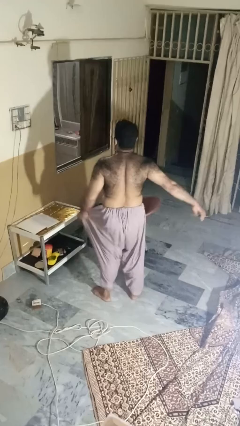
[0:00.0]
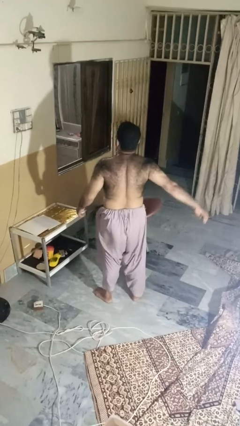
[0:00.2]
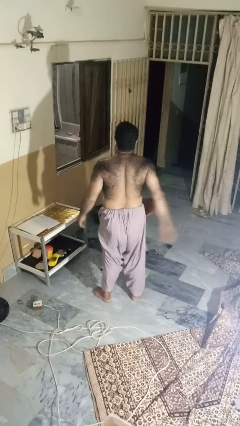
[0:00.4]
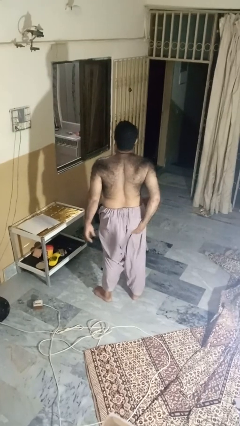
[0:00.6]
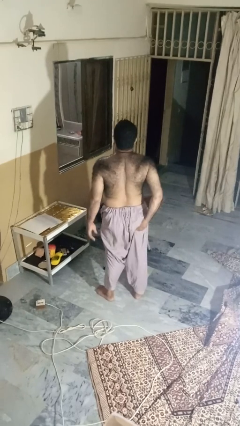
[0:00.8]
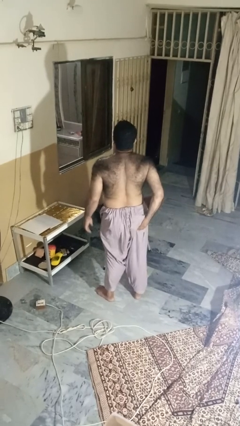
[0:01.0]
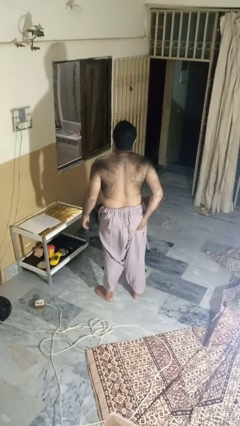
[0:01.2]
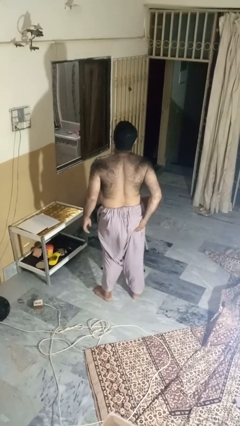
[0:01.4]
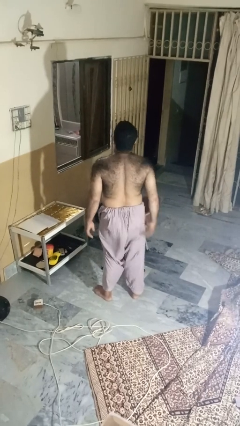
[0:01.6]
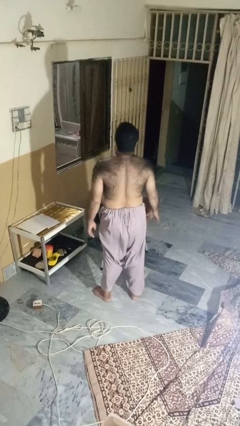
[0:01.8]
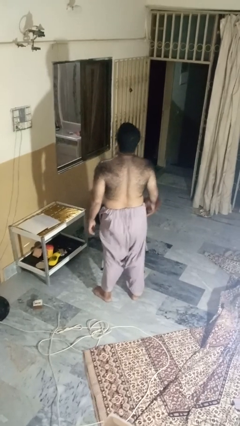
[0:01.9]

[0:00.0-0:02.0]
person wiggles hips

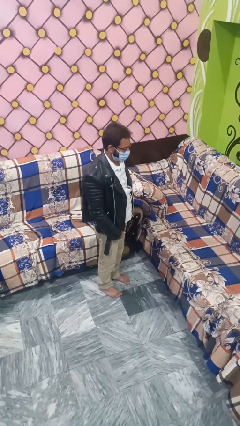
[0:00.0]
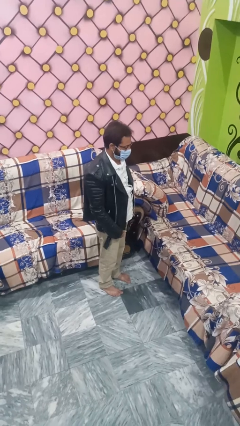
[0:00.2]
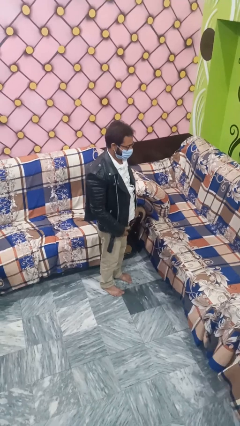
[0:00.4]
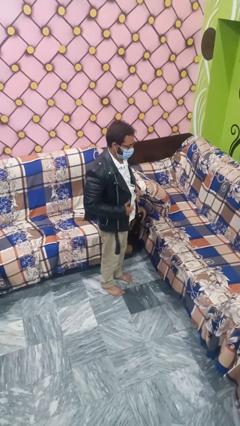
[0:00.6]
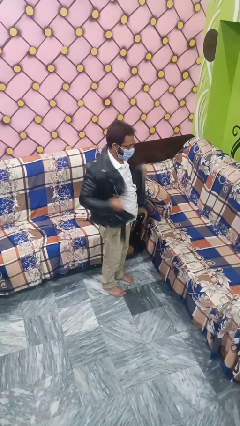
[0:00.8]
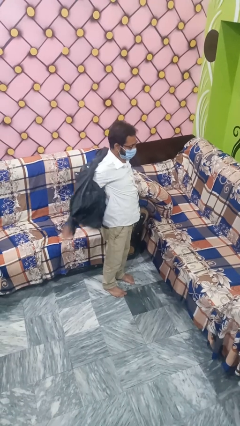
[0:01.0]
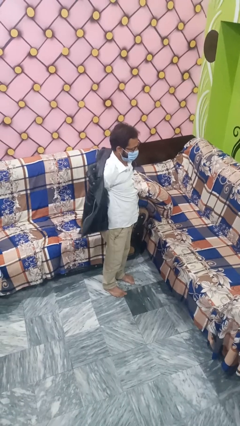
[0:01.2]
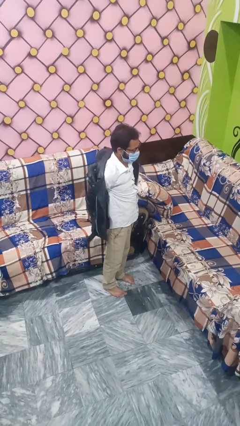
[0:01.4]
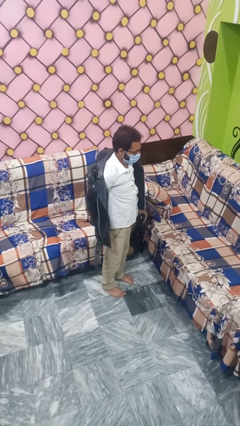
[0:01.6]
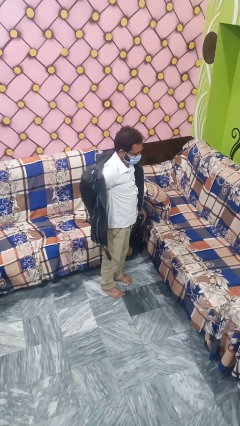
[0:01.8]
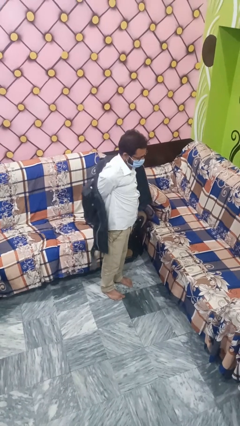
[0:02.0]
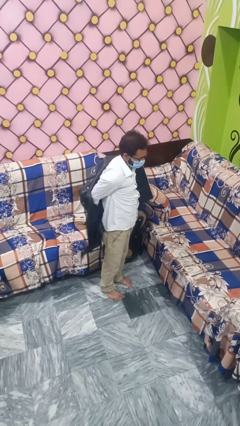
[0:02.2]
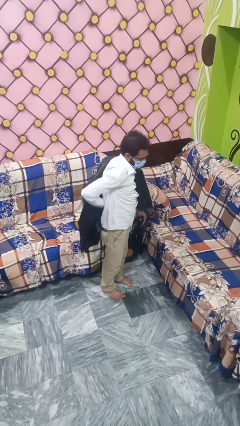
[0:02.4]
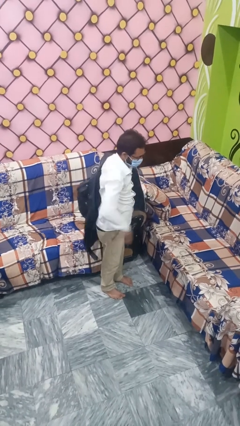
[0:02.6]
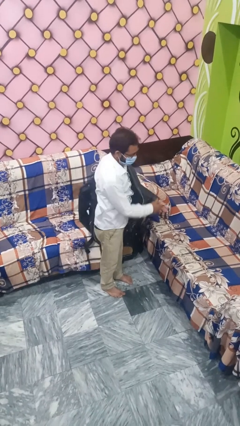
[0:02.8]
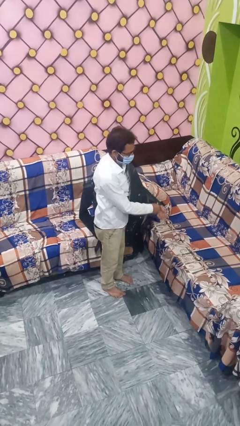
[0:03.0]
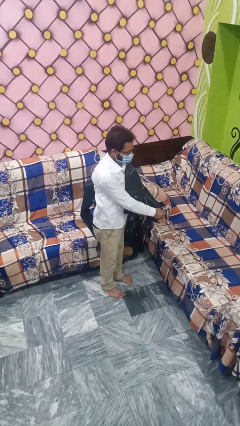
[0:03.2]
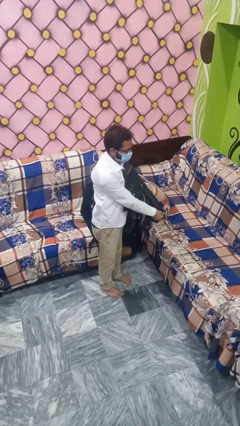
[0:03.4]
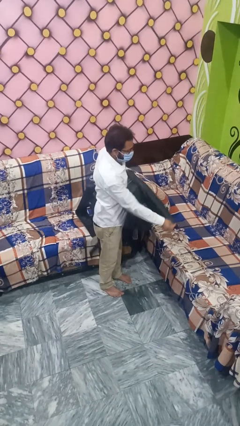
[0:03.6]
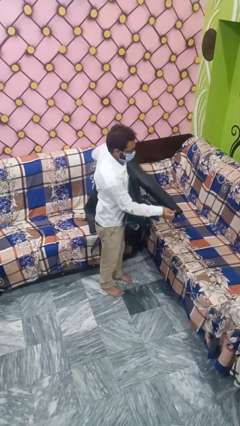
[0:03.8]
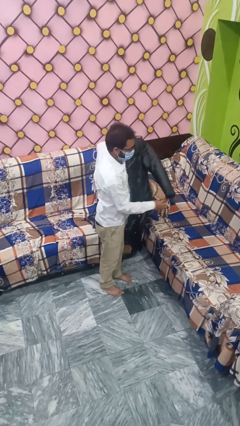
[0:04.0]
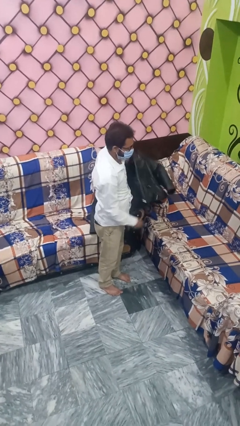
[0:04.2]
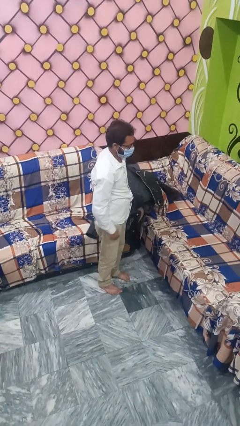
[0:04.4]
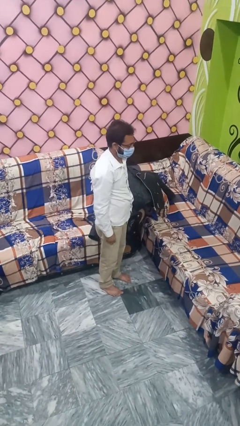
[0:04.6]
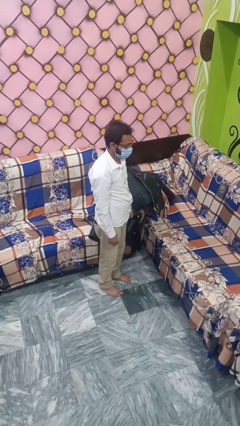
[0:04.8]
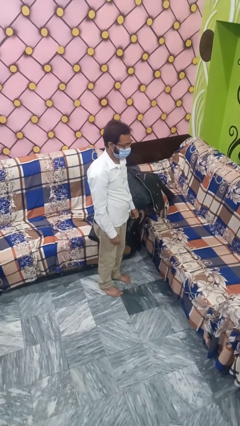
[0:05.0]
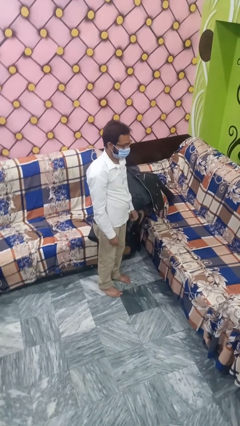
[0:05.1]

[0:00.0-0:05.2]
person takes off jacket

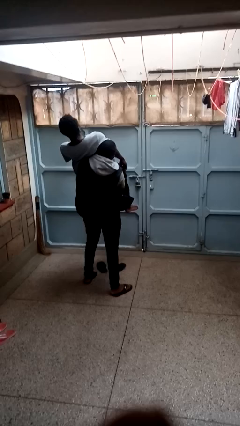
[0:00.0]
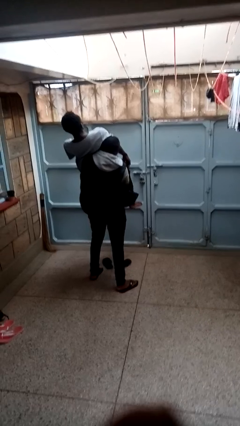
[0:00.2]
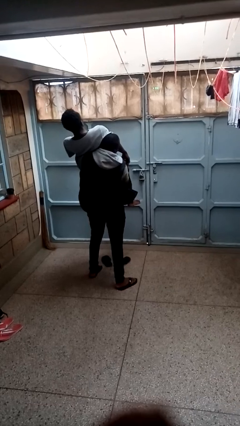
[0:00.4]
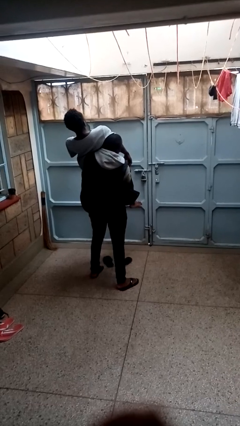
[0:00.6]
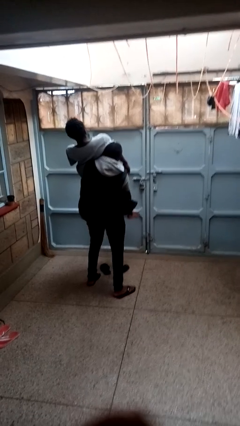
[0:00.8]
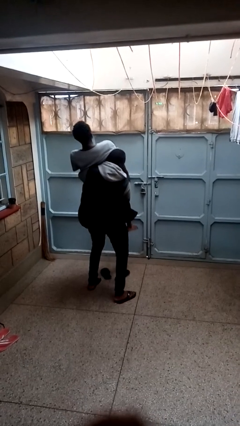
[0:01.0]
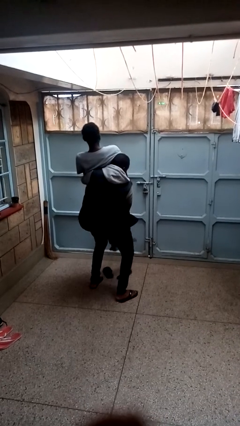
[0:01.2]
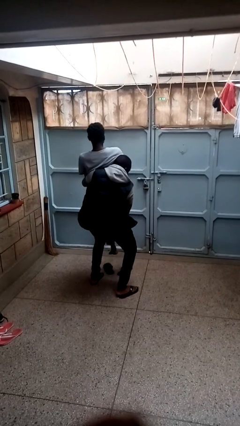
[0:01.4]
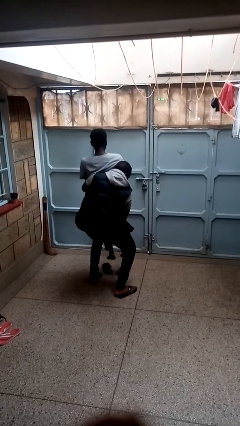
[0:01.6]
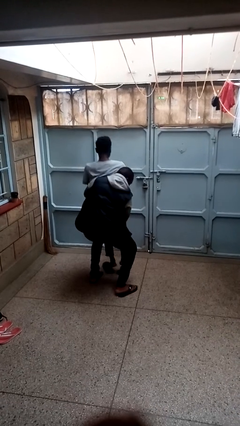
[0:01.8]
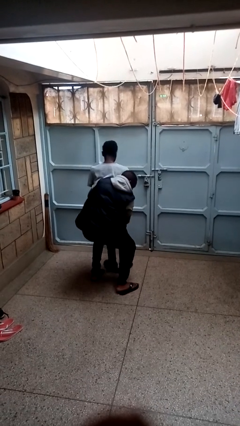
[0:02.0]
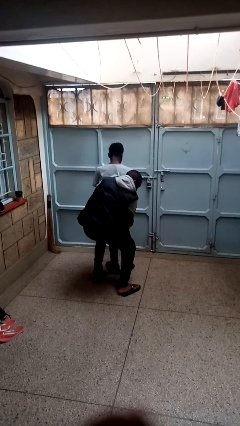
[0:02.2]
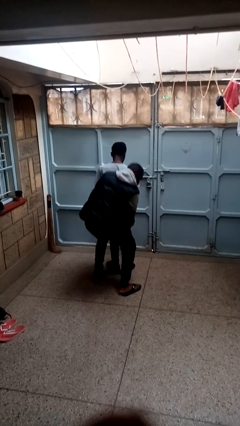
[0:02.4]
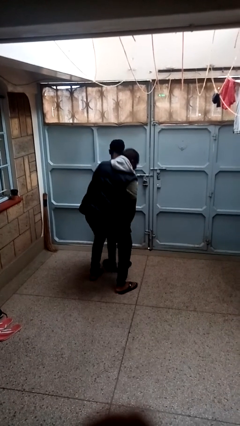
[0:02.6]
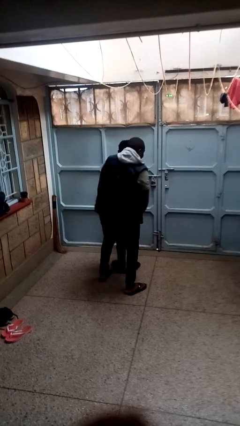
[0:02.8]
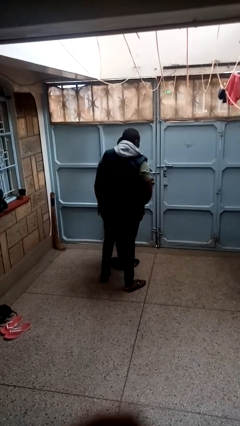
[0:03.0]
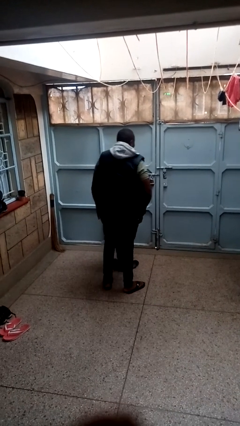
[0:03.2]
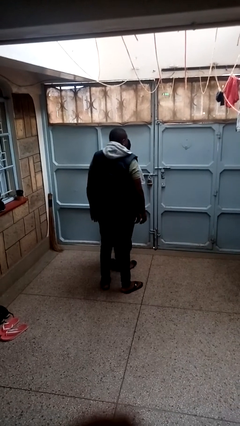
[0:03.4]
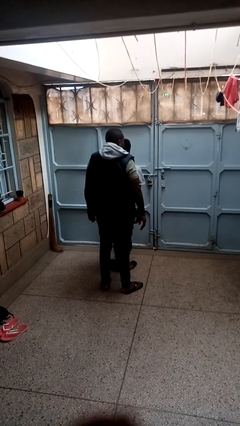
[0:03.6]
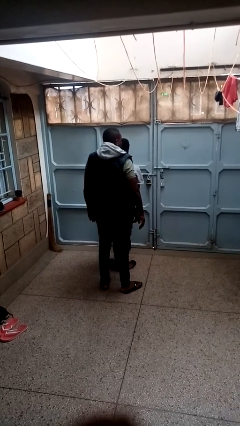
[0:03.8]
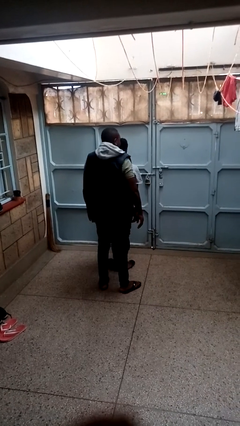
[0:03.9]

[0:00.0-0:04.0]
person puts down person

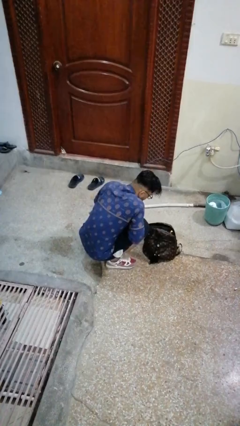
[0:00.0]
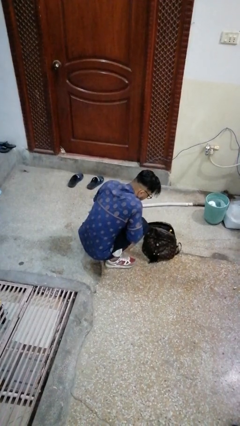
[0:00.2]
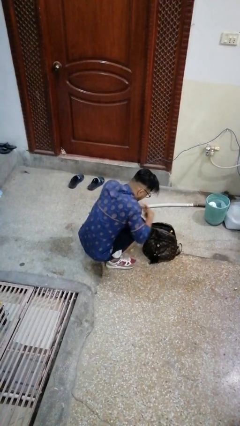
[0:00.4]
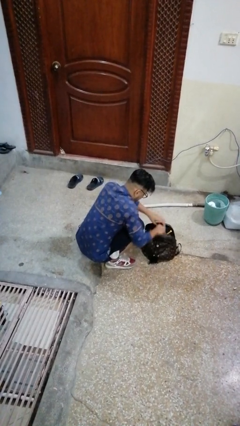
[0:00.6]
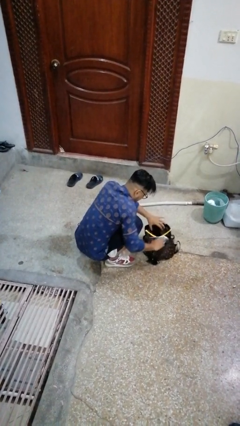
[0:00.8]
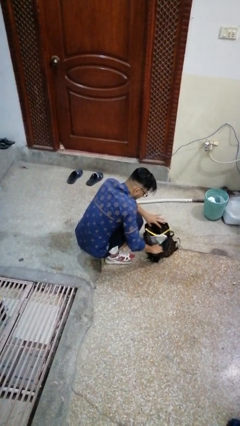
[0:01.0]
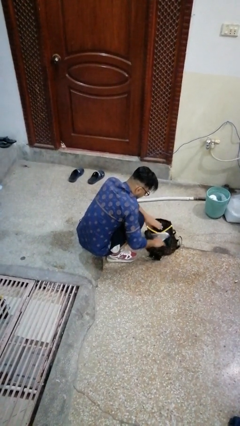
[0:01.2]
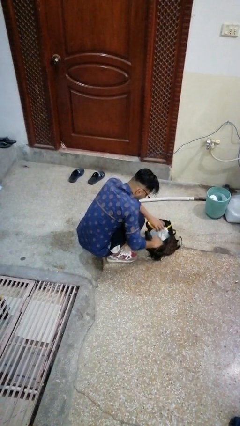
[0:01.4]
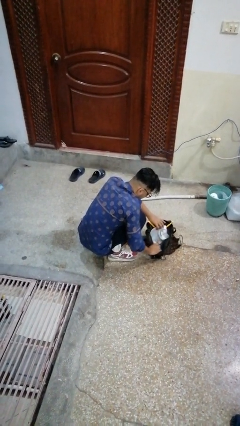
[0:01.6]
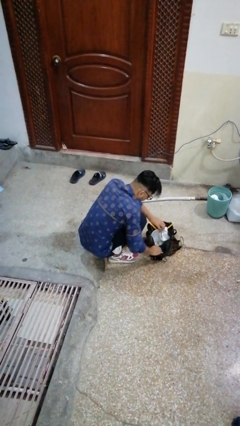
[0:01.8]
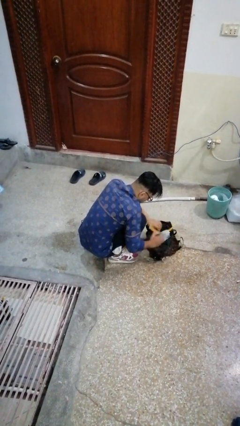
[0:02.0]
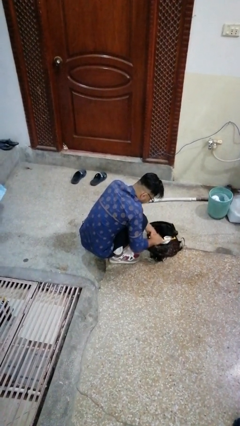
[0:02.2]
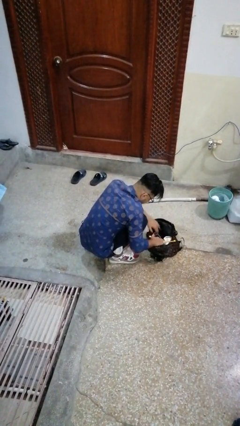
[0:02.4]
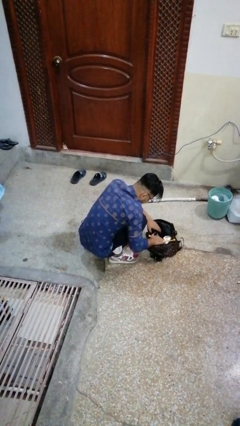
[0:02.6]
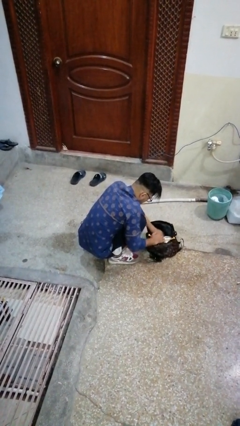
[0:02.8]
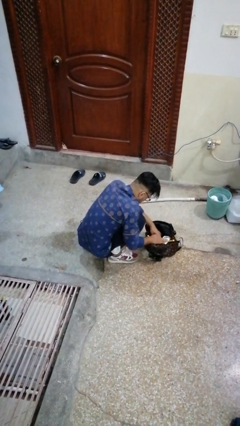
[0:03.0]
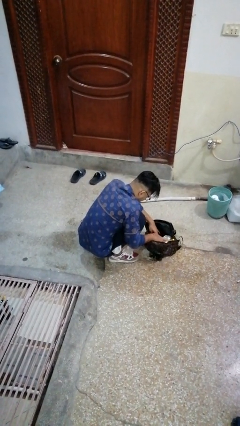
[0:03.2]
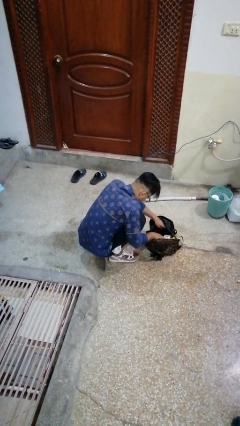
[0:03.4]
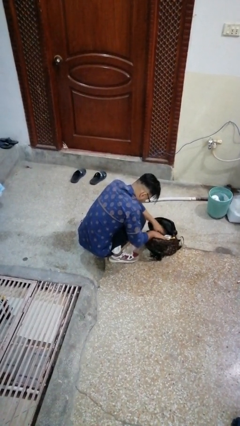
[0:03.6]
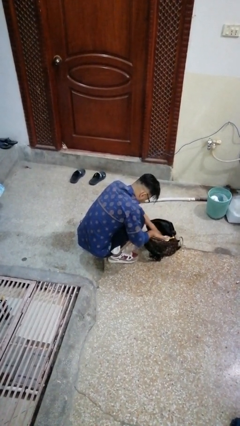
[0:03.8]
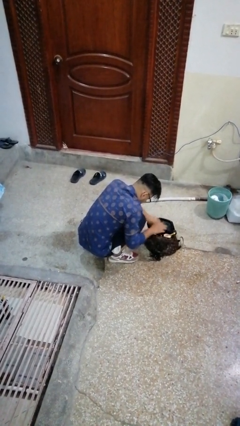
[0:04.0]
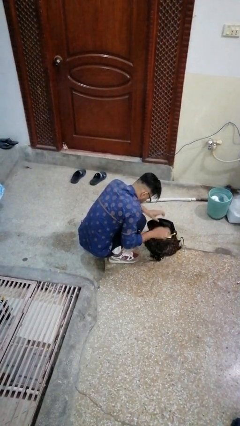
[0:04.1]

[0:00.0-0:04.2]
person searches in bag

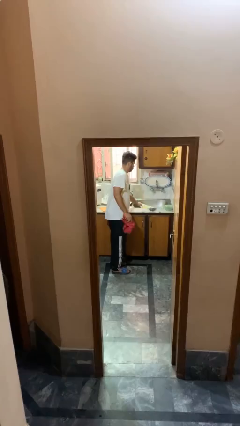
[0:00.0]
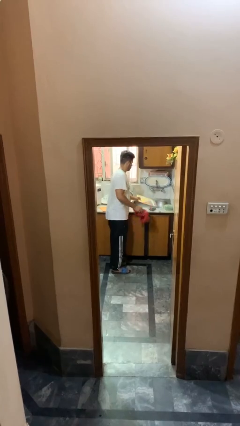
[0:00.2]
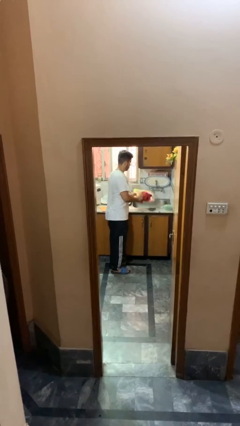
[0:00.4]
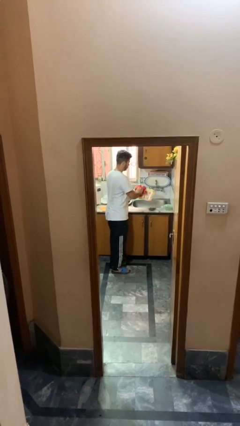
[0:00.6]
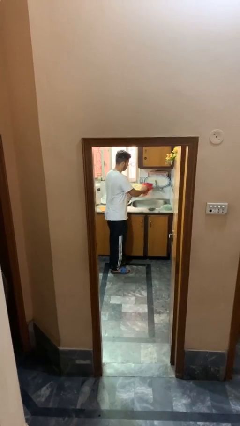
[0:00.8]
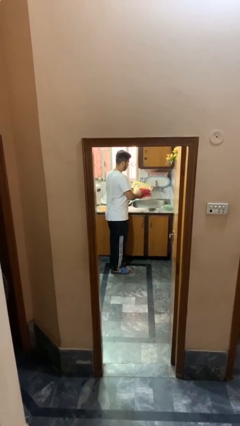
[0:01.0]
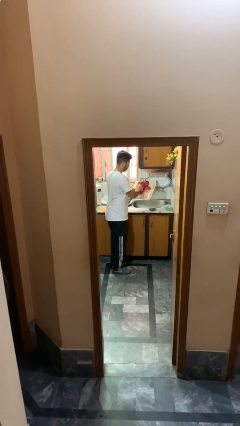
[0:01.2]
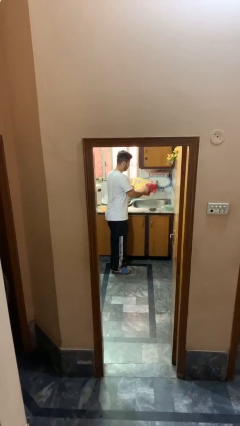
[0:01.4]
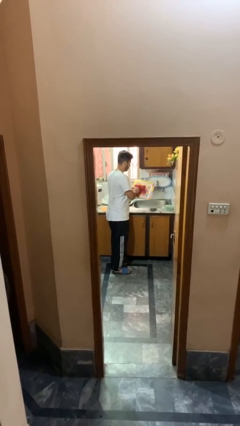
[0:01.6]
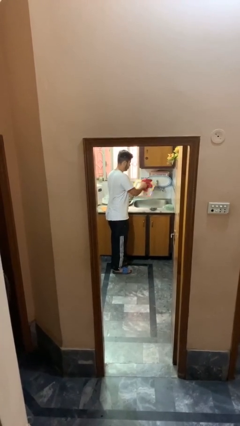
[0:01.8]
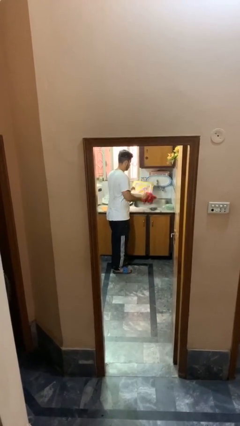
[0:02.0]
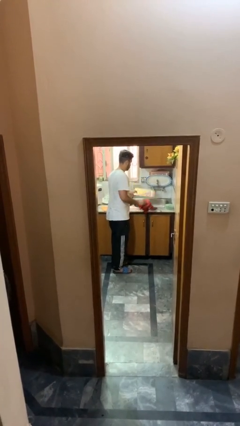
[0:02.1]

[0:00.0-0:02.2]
person dries dish
